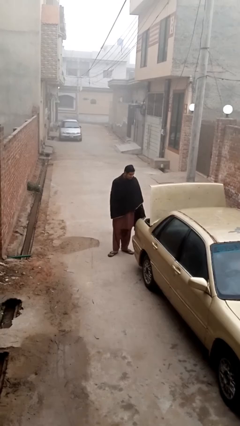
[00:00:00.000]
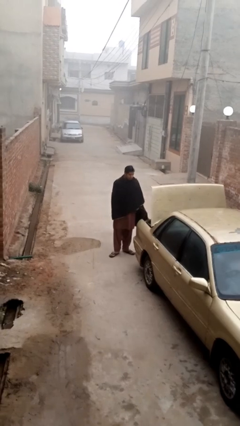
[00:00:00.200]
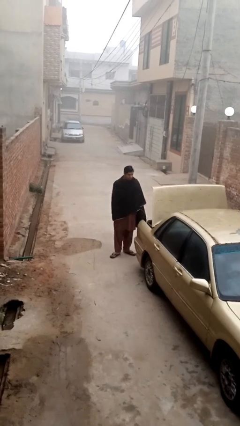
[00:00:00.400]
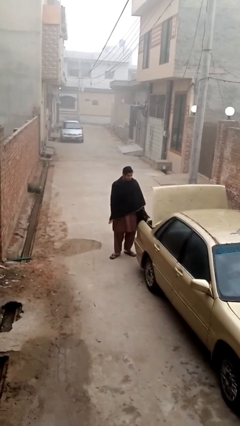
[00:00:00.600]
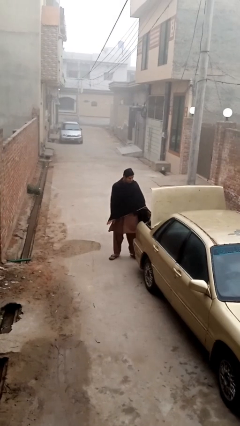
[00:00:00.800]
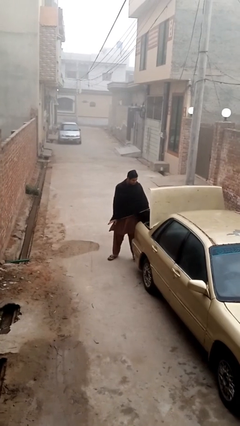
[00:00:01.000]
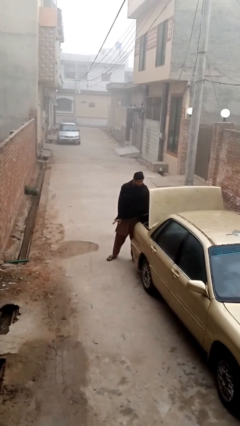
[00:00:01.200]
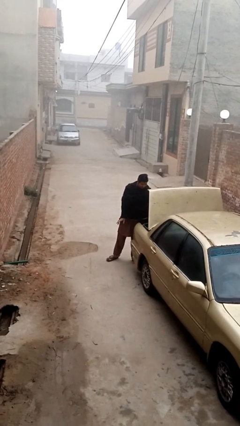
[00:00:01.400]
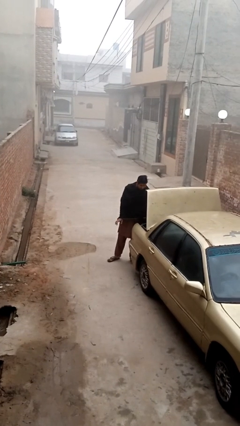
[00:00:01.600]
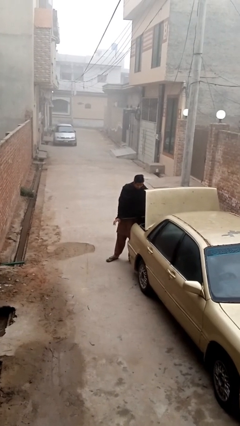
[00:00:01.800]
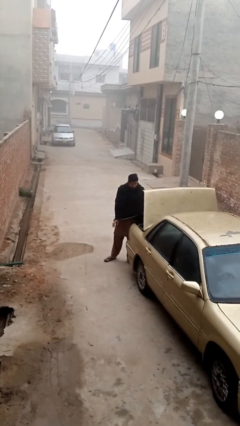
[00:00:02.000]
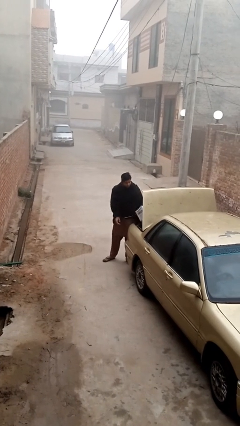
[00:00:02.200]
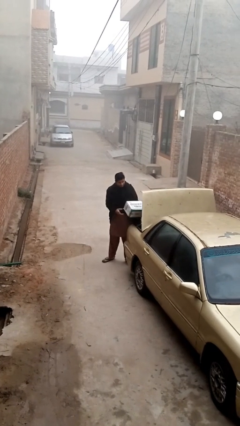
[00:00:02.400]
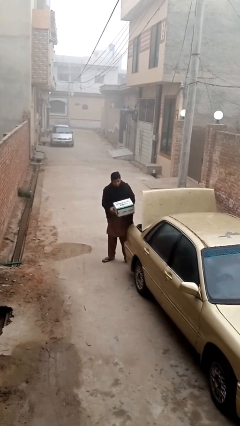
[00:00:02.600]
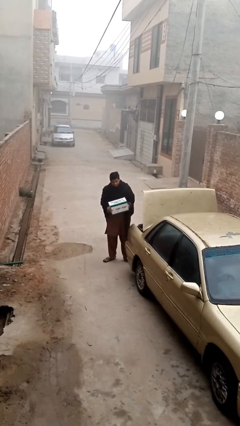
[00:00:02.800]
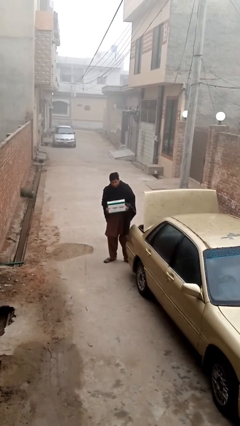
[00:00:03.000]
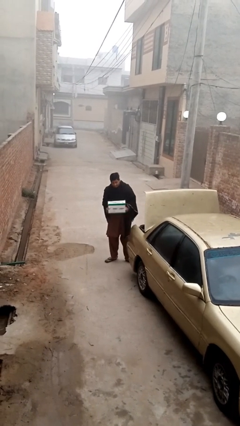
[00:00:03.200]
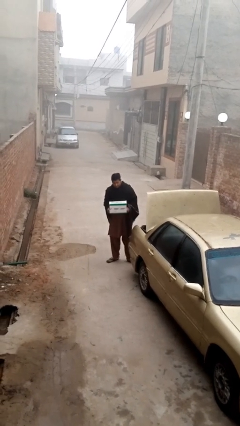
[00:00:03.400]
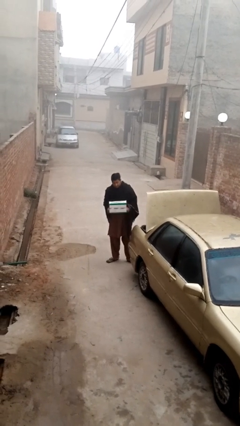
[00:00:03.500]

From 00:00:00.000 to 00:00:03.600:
person unloads car

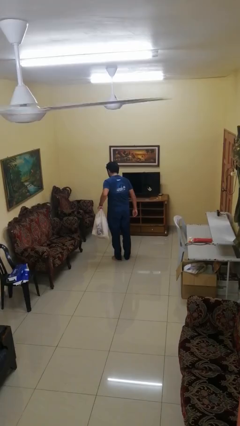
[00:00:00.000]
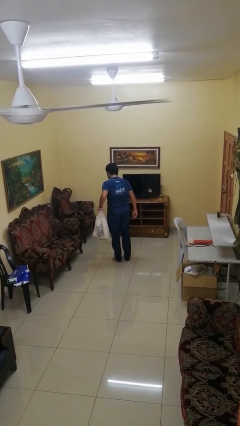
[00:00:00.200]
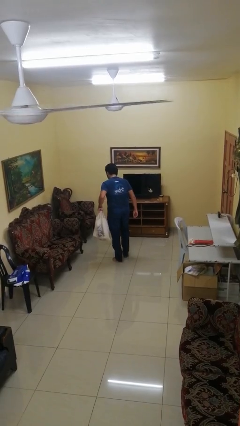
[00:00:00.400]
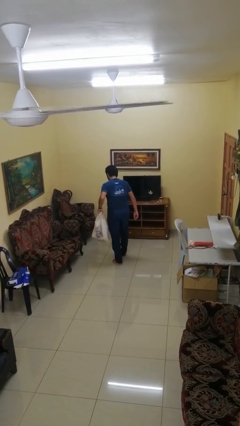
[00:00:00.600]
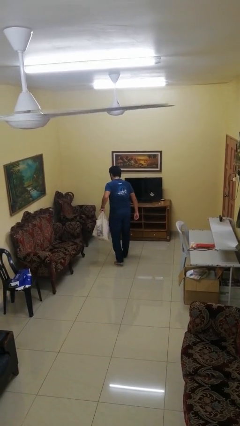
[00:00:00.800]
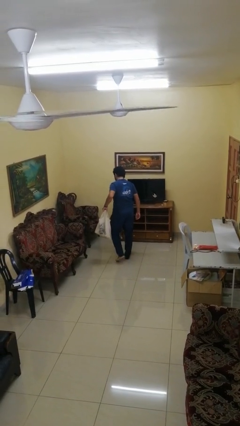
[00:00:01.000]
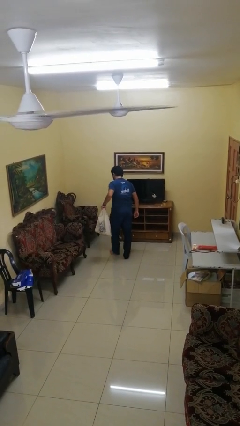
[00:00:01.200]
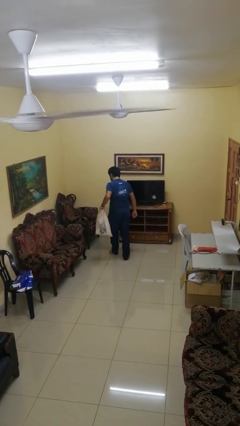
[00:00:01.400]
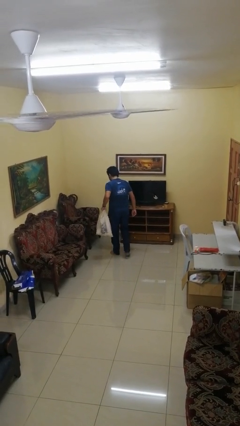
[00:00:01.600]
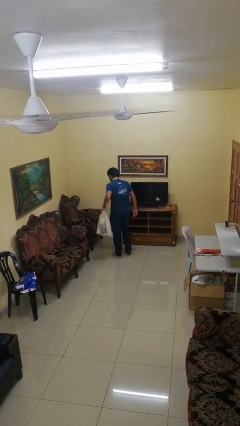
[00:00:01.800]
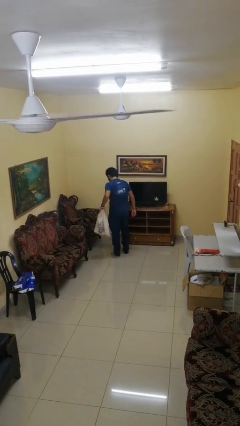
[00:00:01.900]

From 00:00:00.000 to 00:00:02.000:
person carries groceries

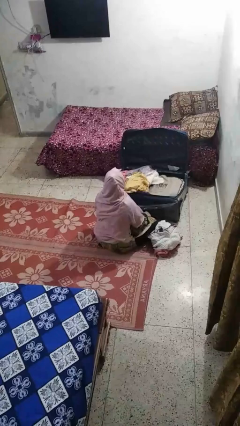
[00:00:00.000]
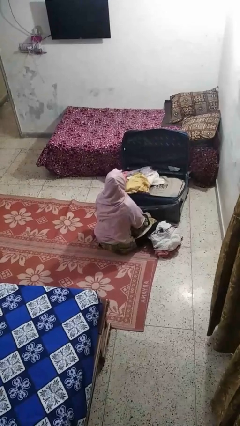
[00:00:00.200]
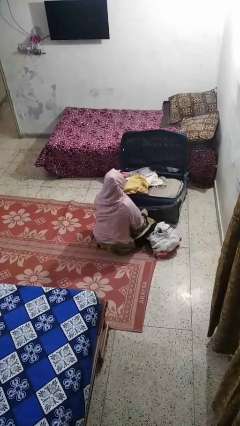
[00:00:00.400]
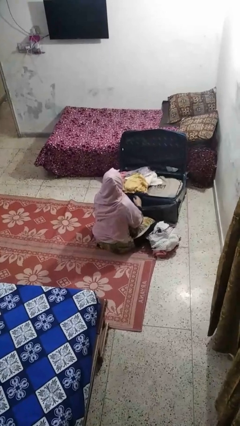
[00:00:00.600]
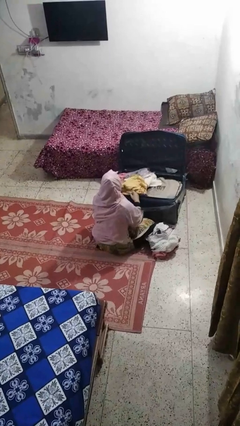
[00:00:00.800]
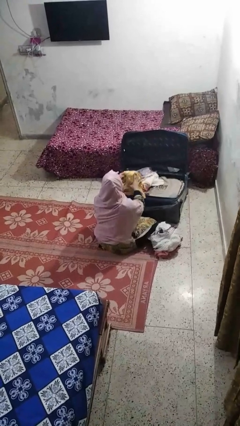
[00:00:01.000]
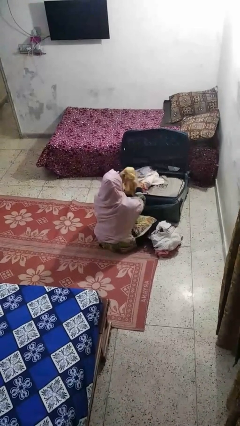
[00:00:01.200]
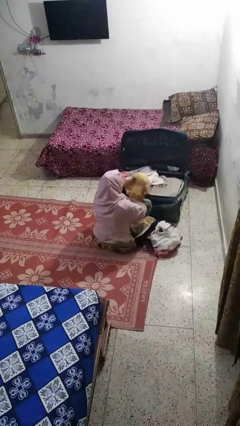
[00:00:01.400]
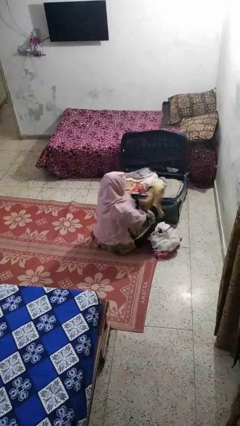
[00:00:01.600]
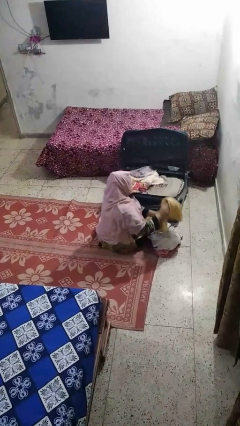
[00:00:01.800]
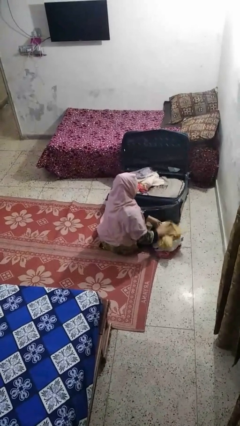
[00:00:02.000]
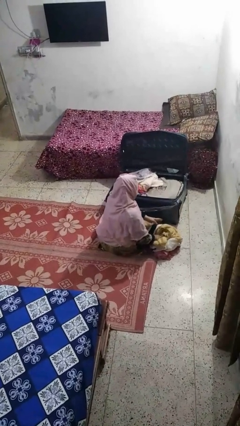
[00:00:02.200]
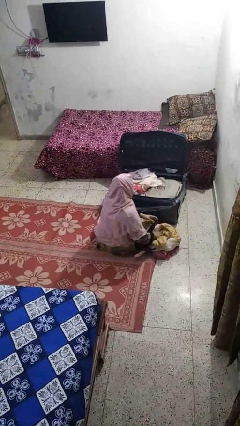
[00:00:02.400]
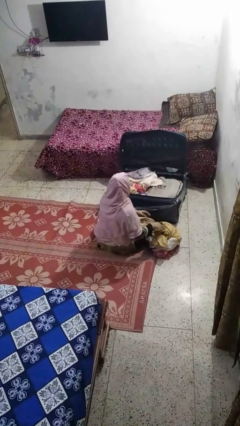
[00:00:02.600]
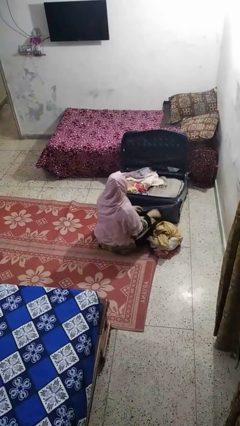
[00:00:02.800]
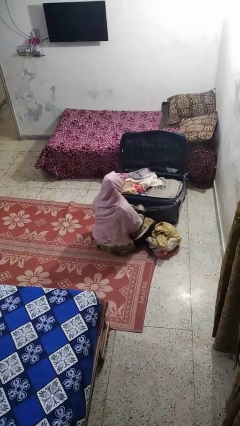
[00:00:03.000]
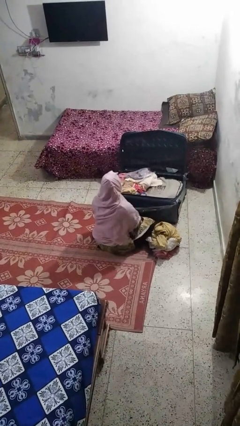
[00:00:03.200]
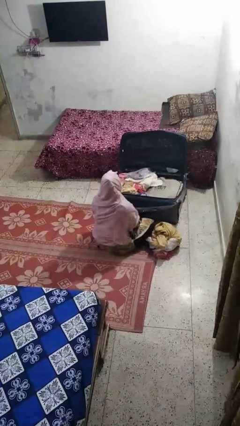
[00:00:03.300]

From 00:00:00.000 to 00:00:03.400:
person unloads clothes from suitcase

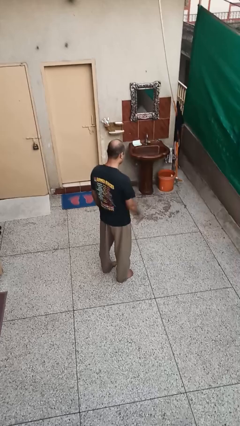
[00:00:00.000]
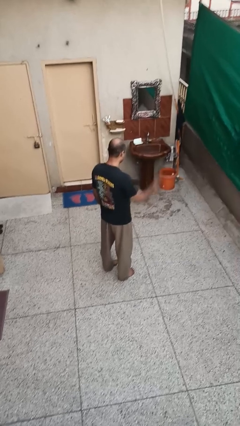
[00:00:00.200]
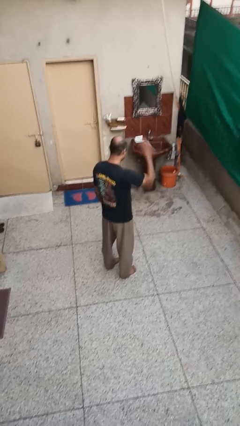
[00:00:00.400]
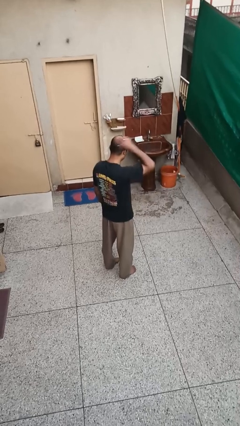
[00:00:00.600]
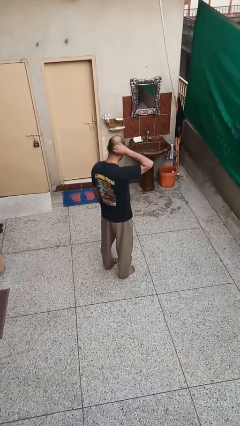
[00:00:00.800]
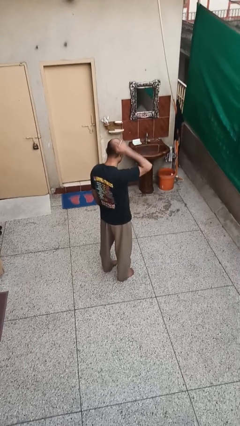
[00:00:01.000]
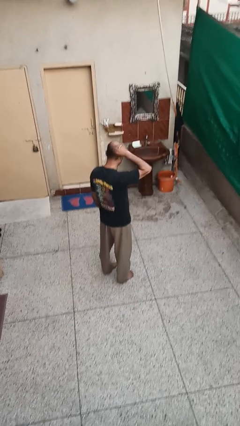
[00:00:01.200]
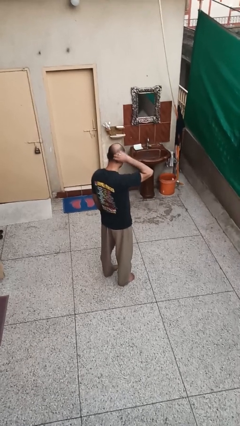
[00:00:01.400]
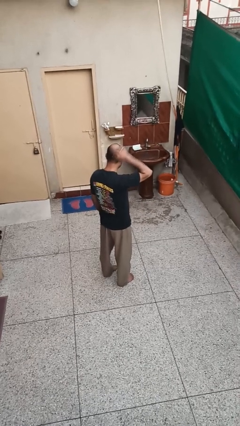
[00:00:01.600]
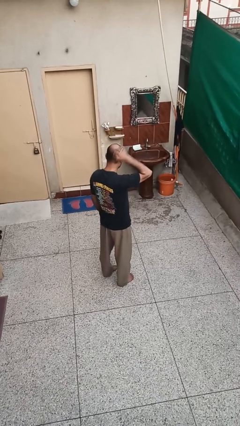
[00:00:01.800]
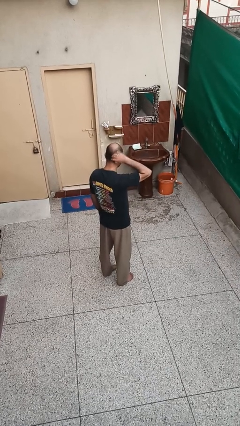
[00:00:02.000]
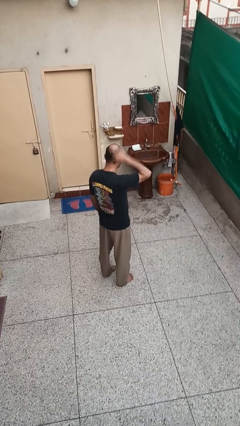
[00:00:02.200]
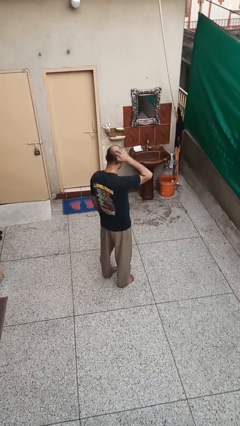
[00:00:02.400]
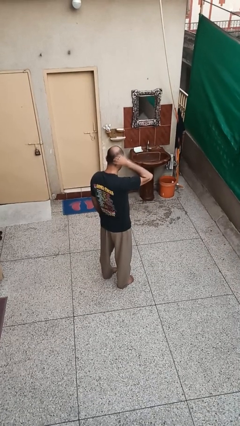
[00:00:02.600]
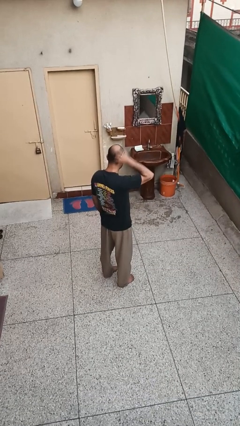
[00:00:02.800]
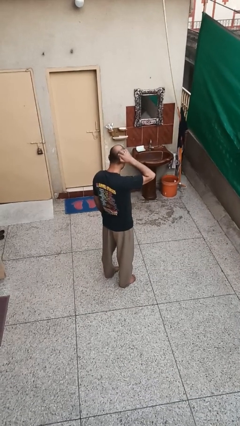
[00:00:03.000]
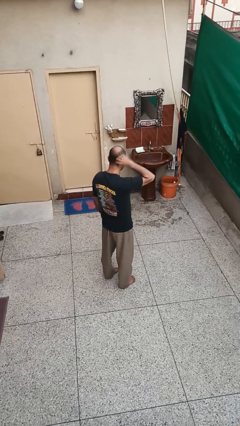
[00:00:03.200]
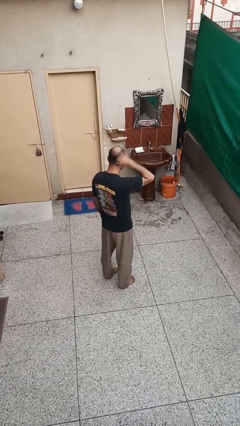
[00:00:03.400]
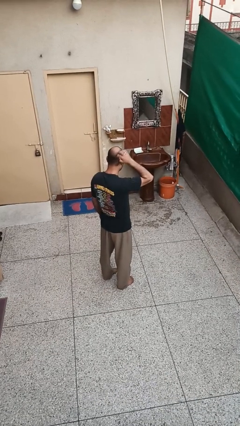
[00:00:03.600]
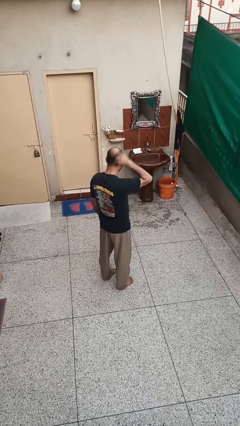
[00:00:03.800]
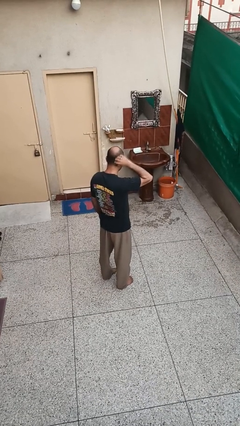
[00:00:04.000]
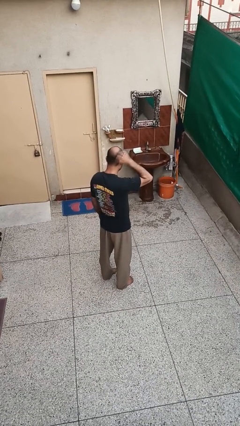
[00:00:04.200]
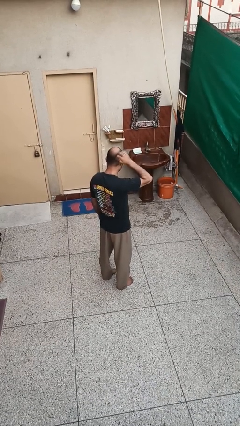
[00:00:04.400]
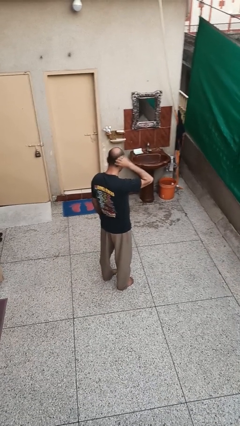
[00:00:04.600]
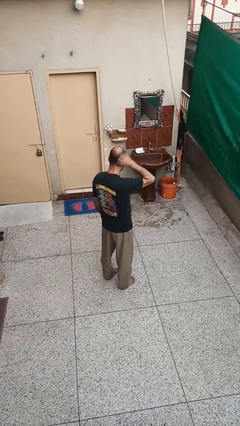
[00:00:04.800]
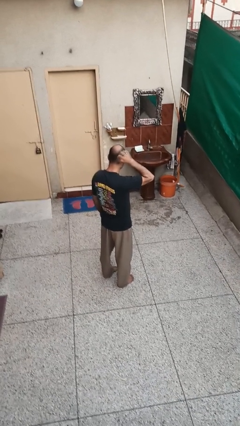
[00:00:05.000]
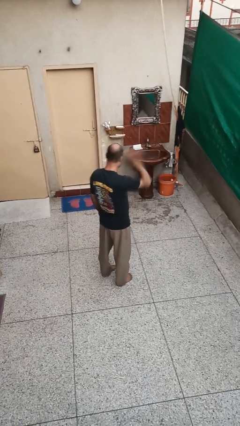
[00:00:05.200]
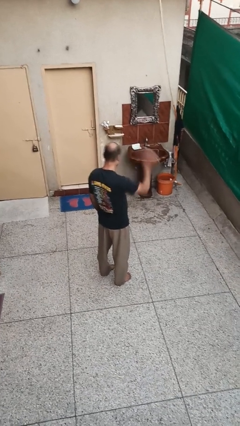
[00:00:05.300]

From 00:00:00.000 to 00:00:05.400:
person scratches face

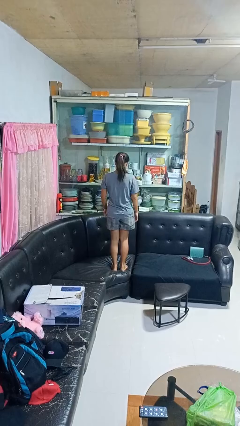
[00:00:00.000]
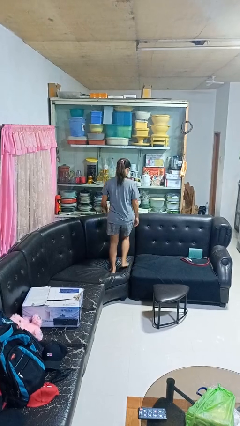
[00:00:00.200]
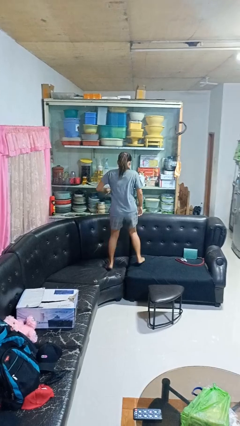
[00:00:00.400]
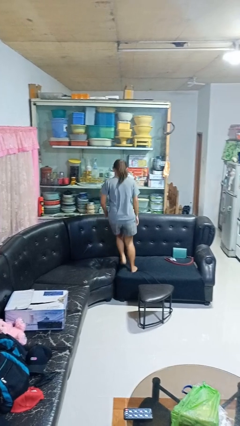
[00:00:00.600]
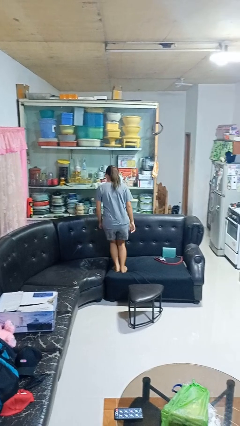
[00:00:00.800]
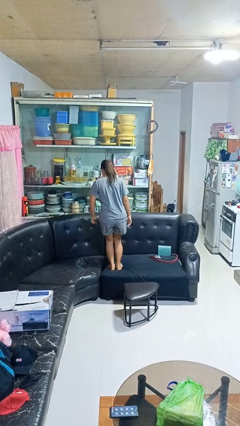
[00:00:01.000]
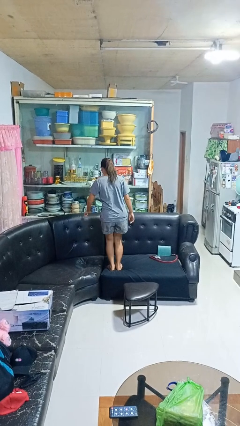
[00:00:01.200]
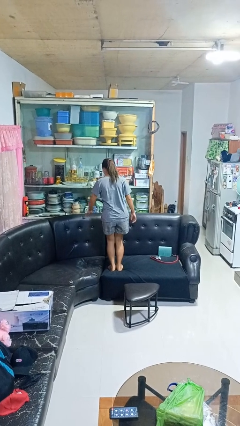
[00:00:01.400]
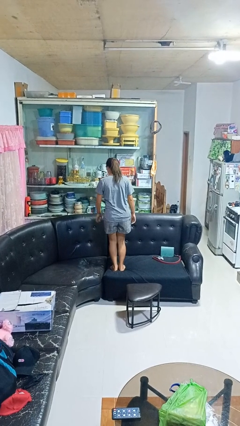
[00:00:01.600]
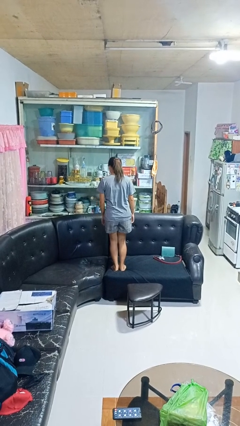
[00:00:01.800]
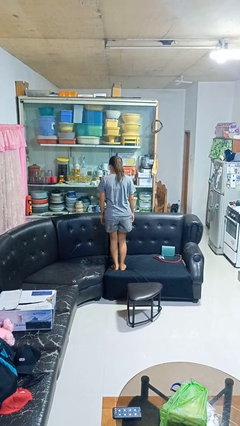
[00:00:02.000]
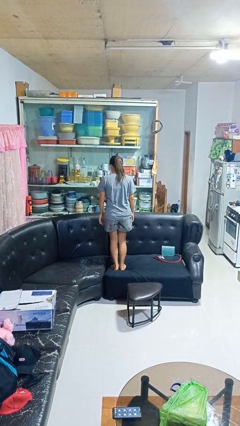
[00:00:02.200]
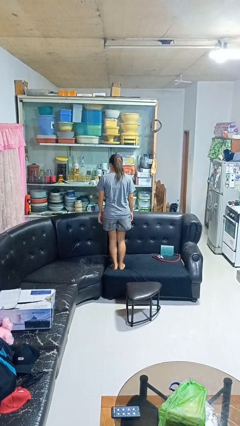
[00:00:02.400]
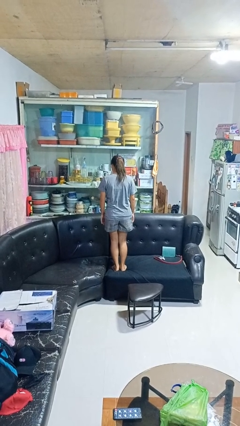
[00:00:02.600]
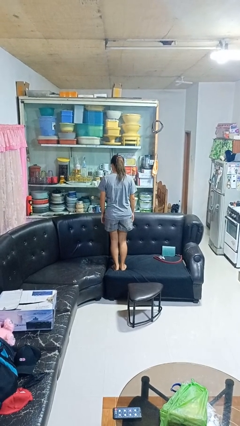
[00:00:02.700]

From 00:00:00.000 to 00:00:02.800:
person jumps on couch

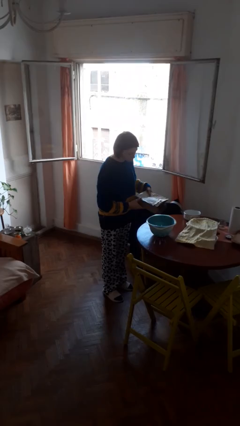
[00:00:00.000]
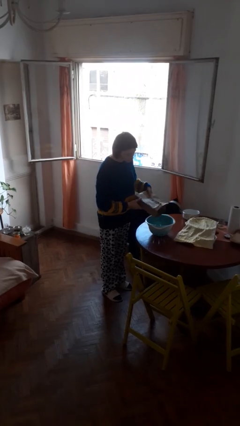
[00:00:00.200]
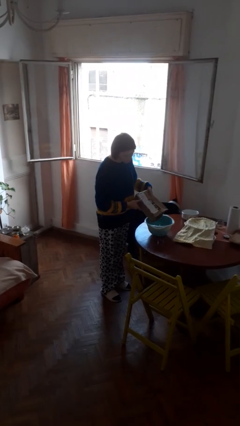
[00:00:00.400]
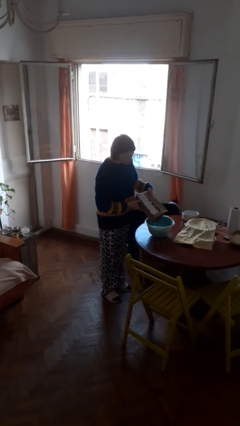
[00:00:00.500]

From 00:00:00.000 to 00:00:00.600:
person pours into bowl
